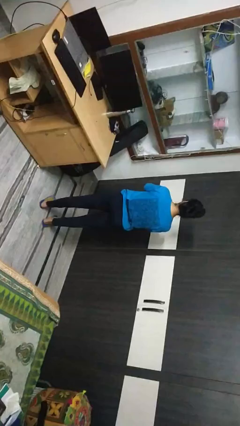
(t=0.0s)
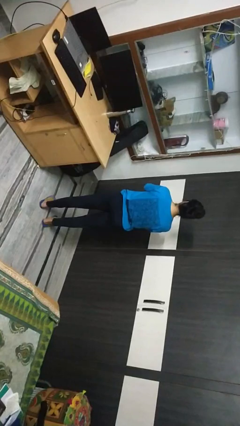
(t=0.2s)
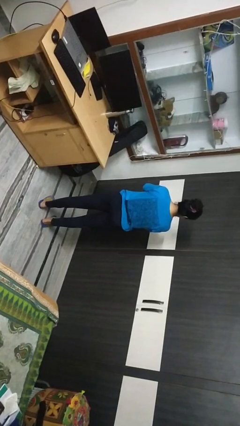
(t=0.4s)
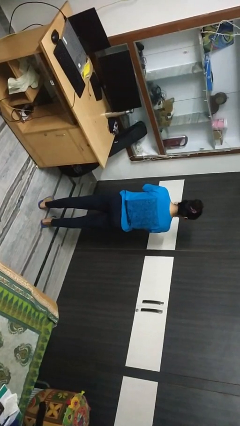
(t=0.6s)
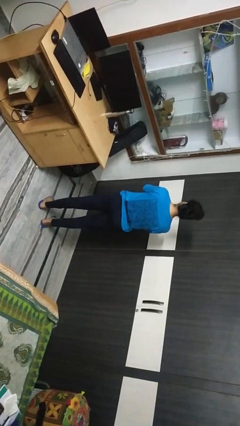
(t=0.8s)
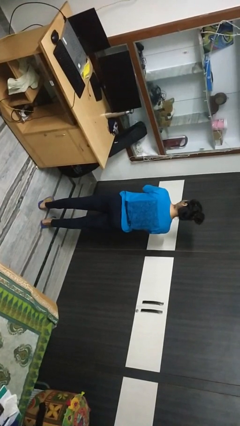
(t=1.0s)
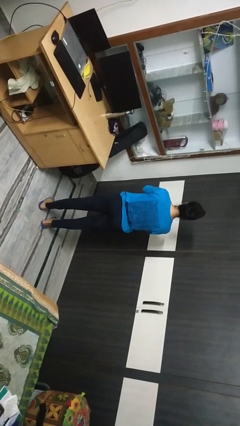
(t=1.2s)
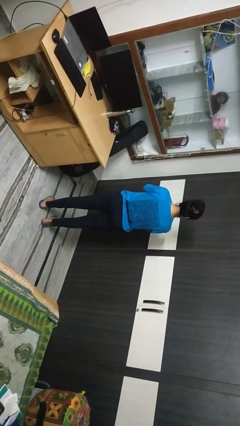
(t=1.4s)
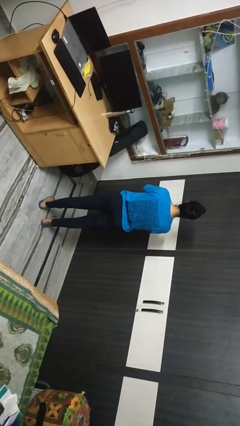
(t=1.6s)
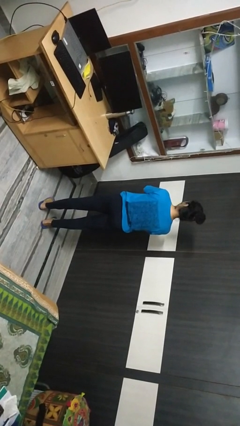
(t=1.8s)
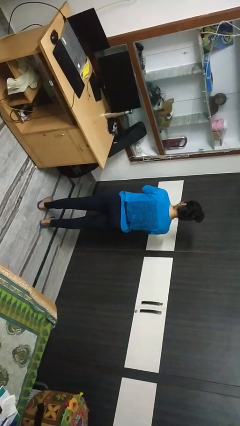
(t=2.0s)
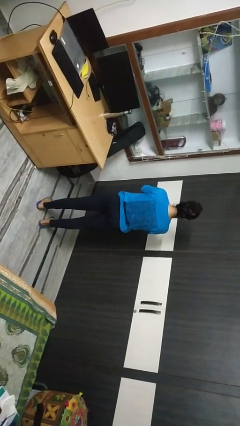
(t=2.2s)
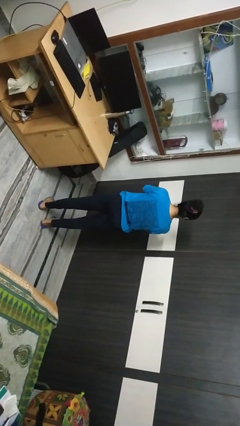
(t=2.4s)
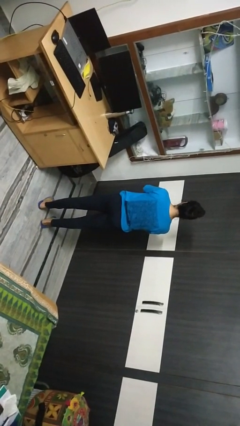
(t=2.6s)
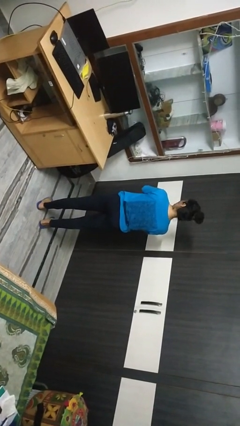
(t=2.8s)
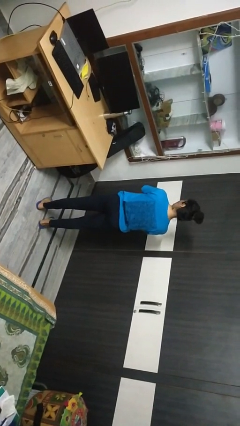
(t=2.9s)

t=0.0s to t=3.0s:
person shakes head

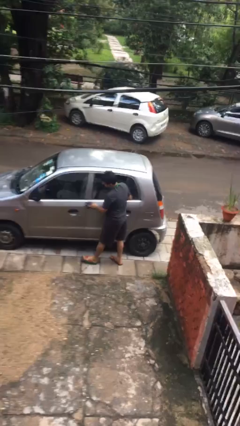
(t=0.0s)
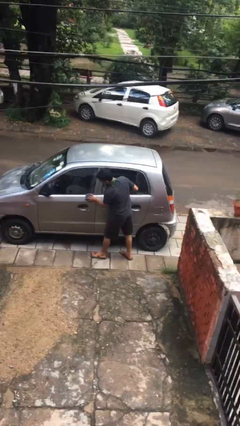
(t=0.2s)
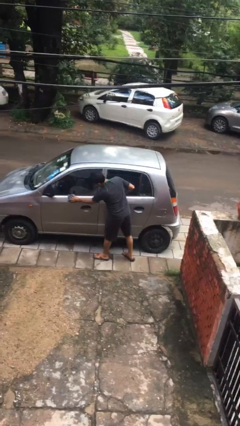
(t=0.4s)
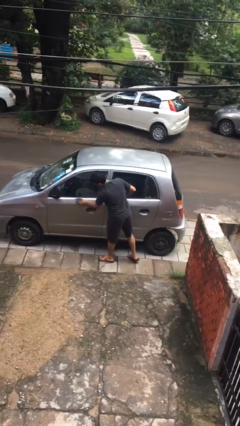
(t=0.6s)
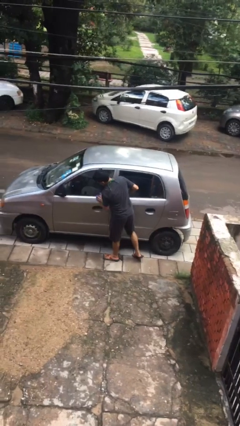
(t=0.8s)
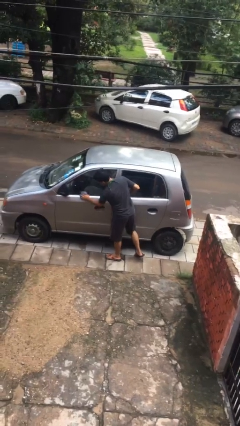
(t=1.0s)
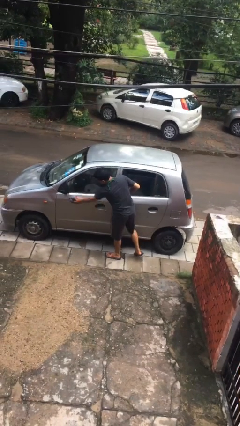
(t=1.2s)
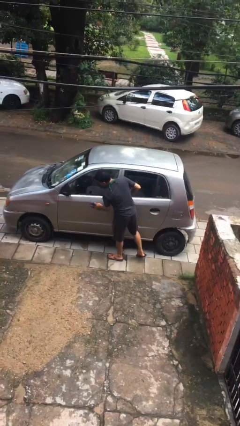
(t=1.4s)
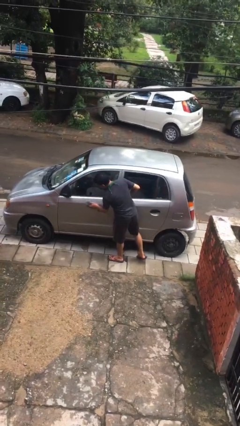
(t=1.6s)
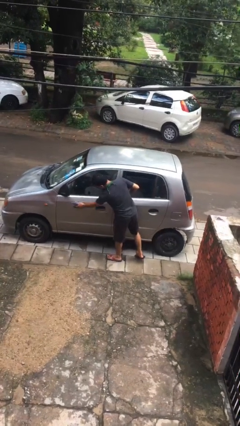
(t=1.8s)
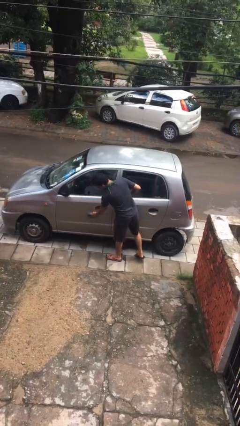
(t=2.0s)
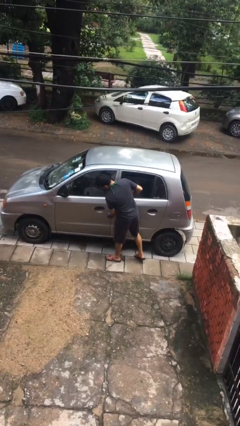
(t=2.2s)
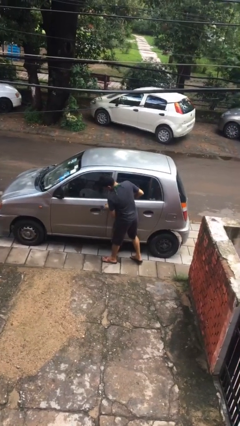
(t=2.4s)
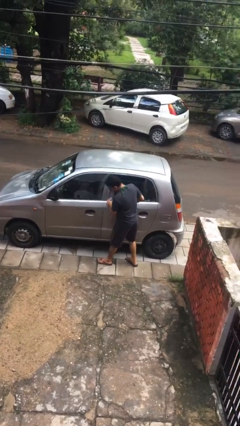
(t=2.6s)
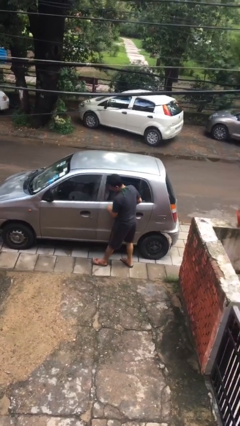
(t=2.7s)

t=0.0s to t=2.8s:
person polishes car with rag

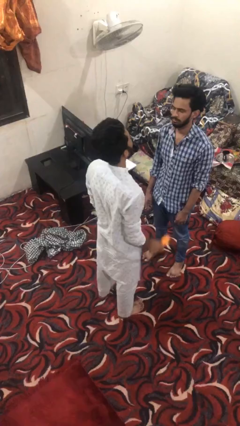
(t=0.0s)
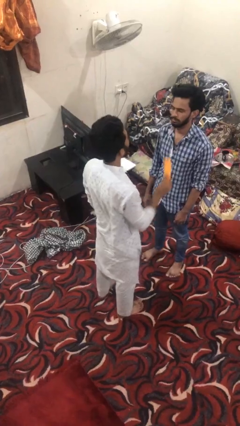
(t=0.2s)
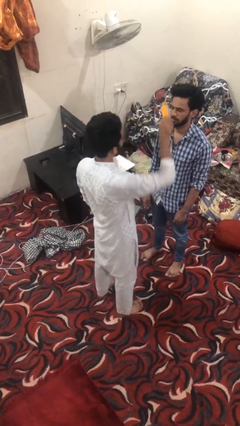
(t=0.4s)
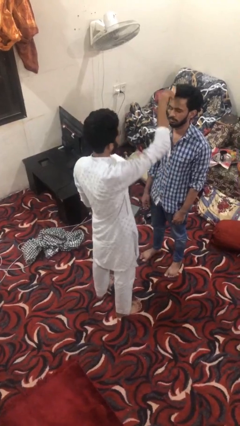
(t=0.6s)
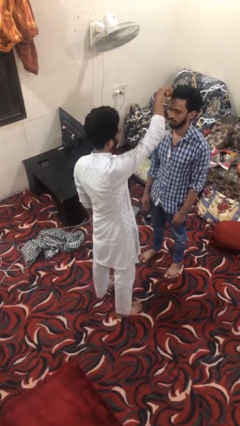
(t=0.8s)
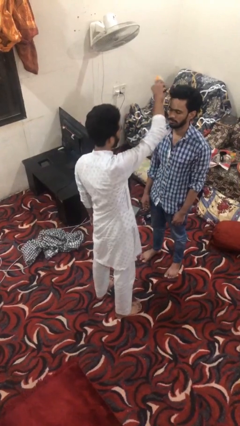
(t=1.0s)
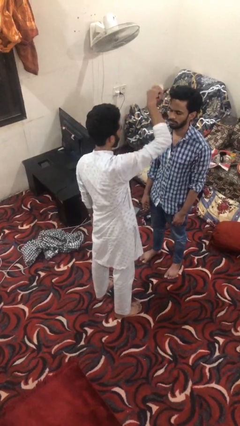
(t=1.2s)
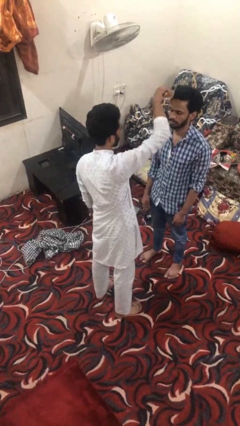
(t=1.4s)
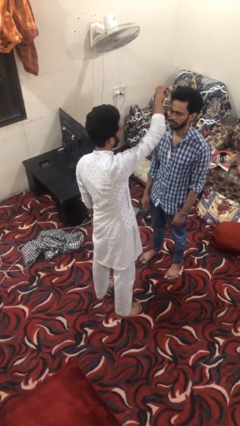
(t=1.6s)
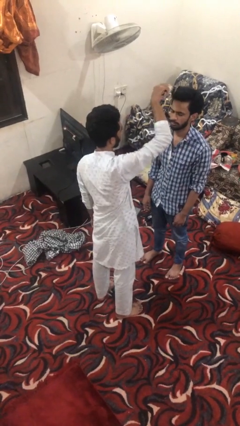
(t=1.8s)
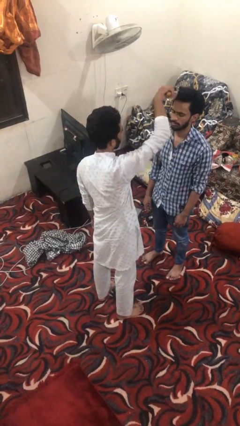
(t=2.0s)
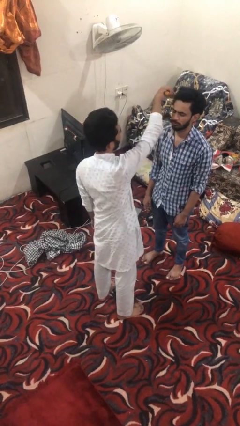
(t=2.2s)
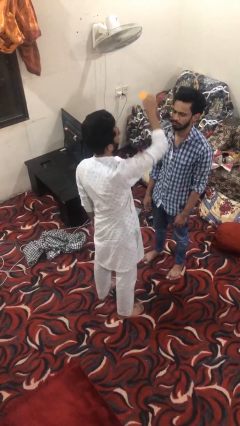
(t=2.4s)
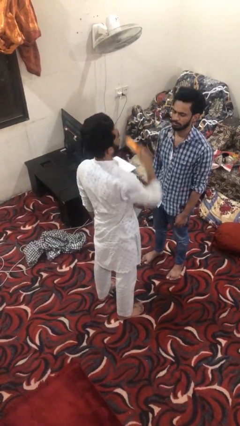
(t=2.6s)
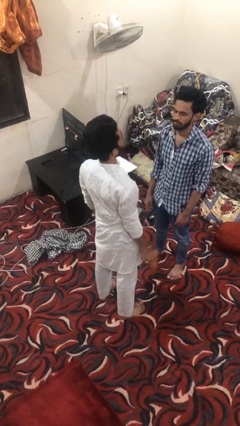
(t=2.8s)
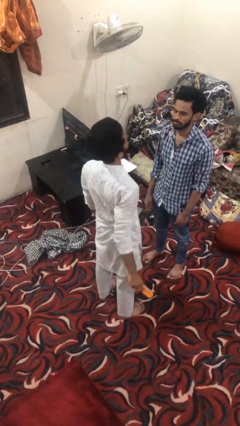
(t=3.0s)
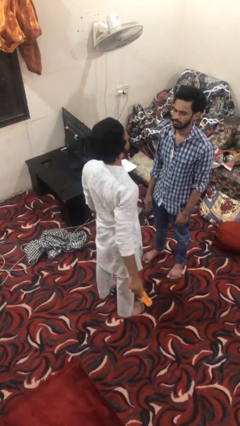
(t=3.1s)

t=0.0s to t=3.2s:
person brushes hair of person

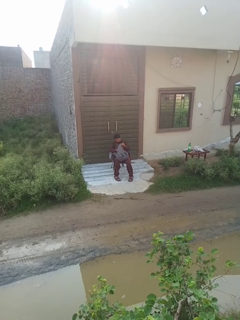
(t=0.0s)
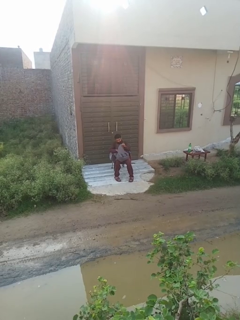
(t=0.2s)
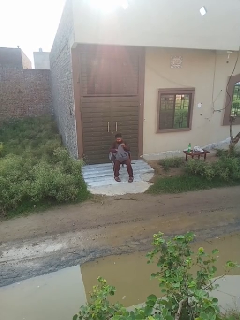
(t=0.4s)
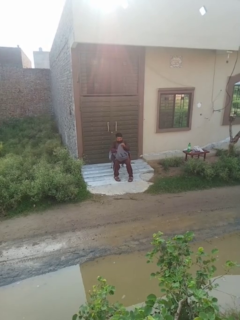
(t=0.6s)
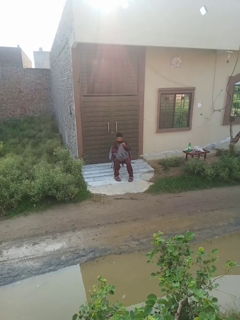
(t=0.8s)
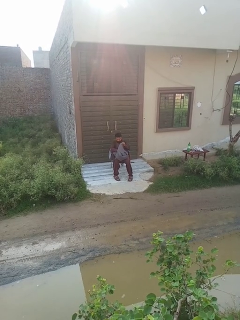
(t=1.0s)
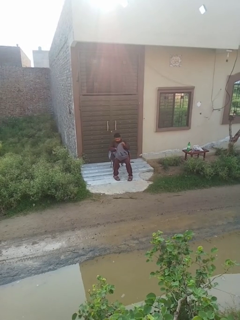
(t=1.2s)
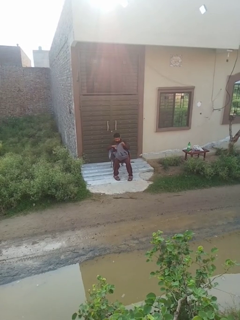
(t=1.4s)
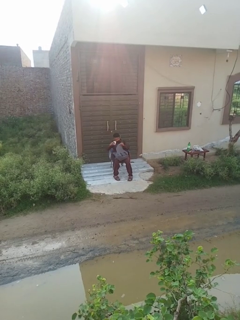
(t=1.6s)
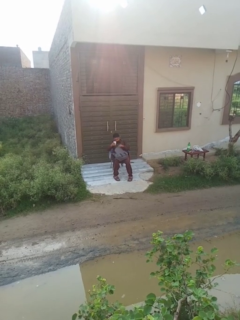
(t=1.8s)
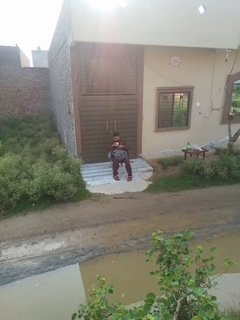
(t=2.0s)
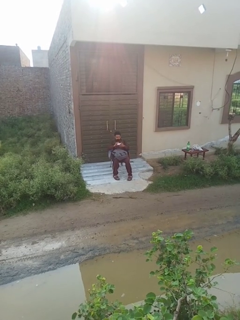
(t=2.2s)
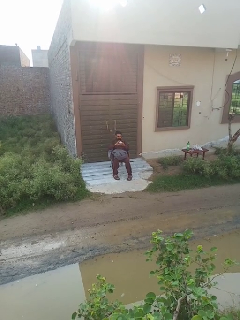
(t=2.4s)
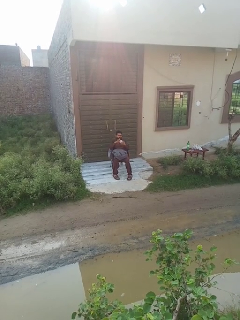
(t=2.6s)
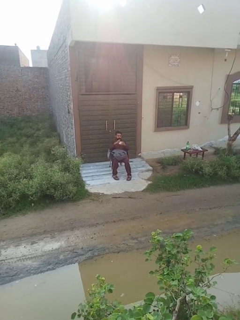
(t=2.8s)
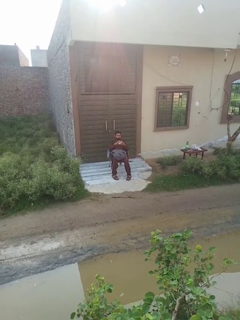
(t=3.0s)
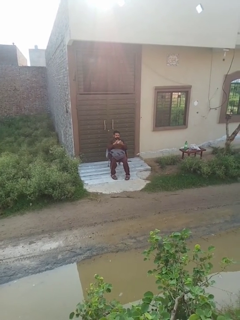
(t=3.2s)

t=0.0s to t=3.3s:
person takes object from backpack

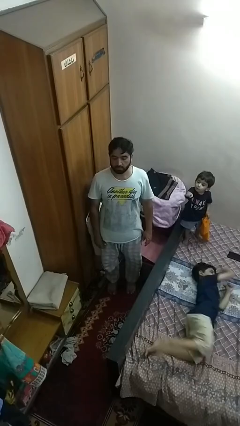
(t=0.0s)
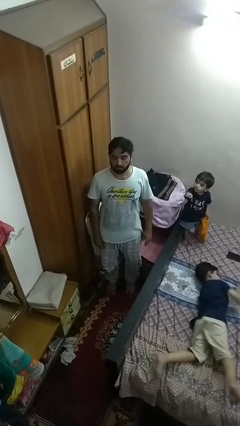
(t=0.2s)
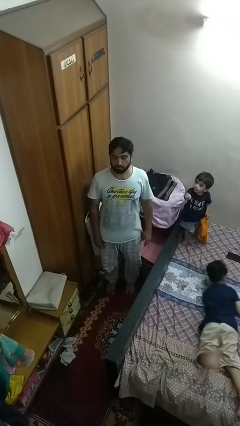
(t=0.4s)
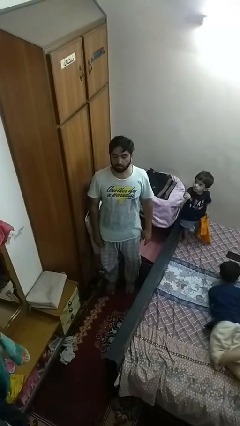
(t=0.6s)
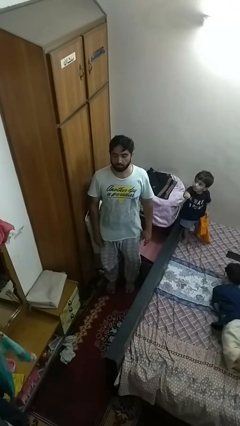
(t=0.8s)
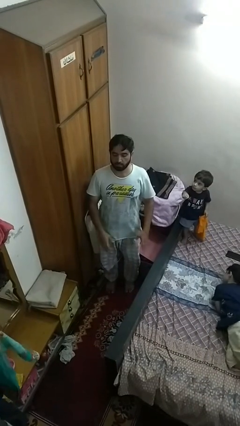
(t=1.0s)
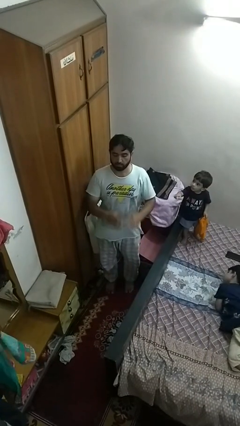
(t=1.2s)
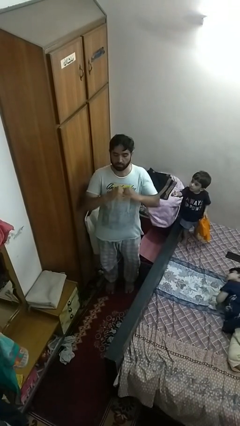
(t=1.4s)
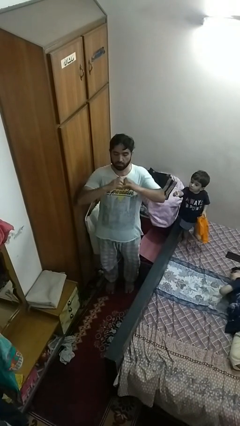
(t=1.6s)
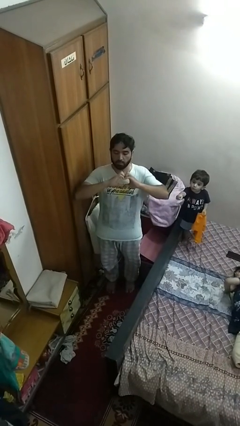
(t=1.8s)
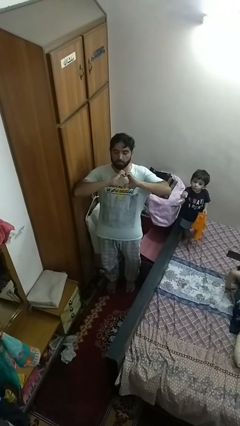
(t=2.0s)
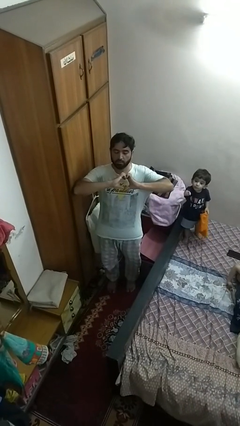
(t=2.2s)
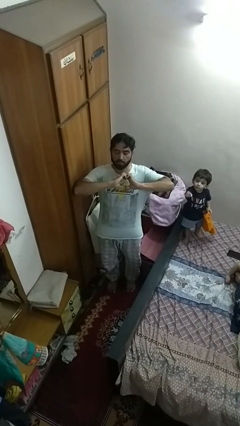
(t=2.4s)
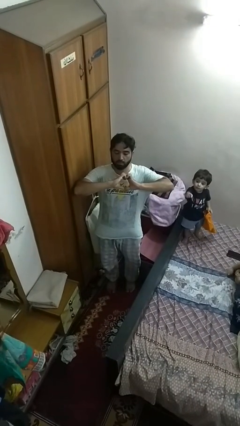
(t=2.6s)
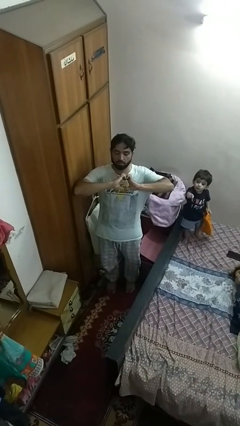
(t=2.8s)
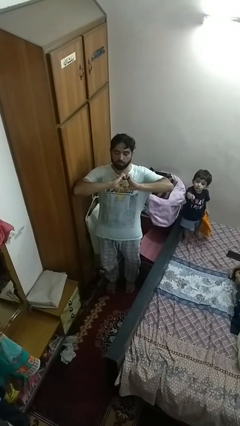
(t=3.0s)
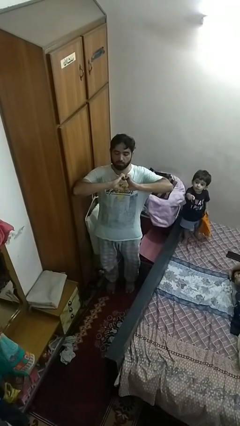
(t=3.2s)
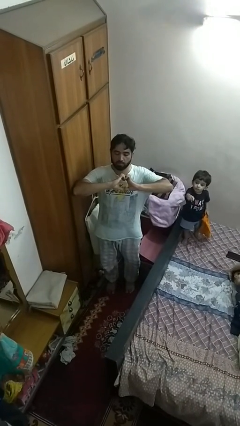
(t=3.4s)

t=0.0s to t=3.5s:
person gestures heart

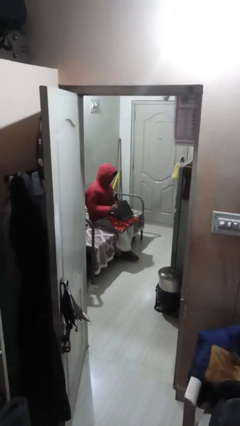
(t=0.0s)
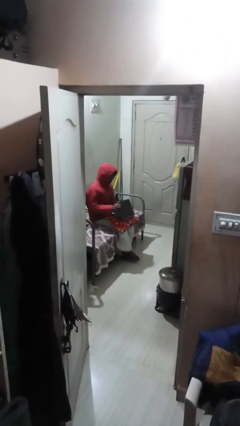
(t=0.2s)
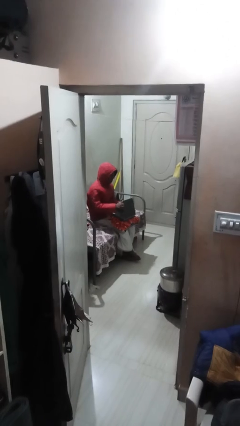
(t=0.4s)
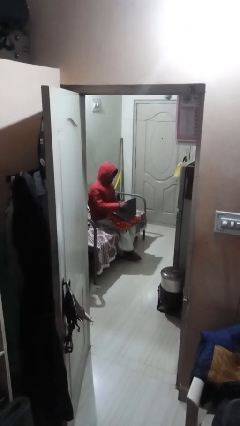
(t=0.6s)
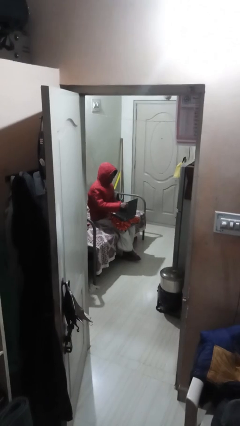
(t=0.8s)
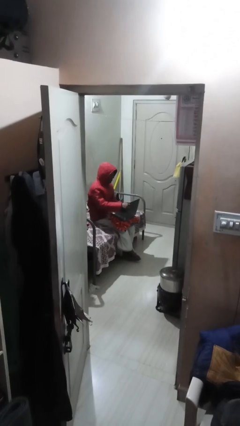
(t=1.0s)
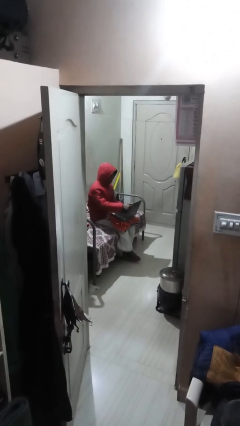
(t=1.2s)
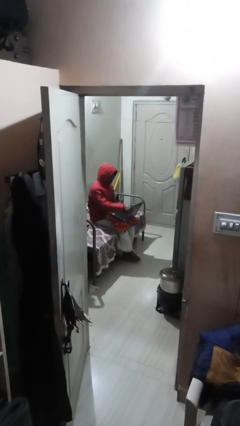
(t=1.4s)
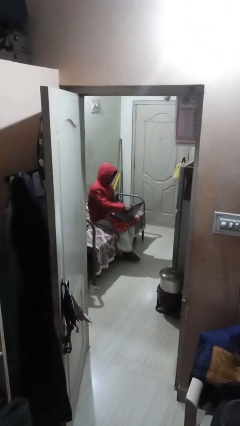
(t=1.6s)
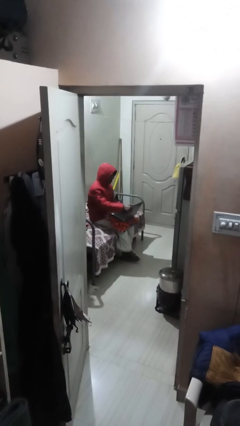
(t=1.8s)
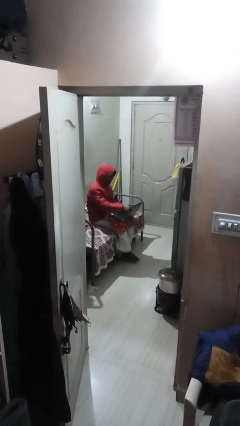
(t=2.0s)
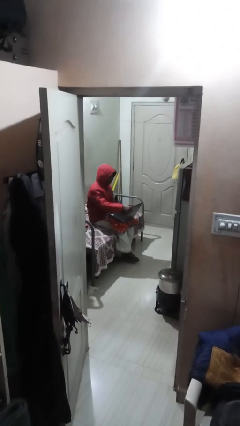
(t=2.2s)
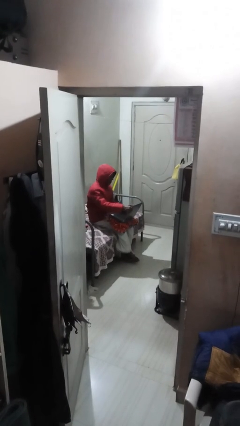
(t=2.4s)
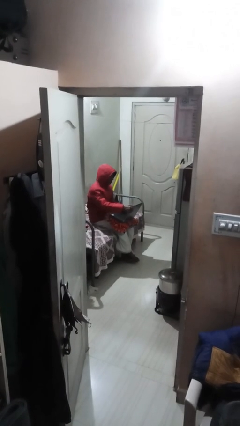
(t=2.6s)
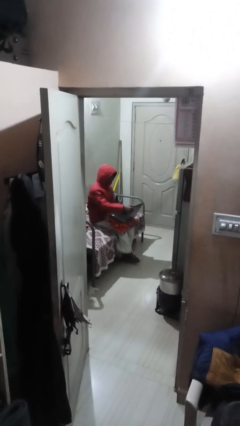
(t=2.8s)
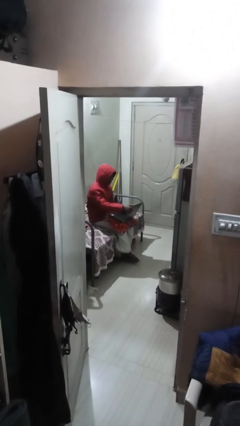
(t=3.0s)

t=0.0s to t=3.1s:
person interacts with laptop
